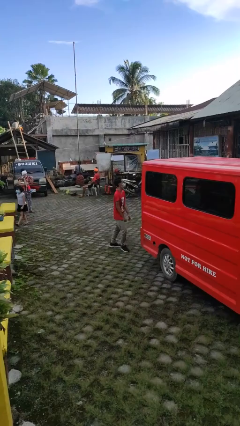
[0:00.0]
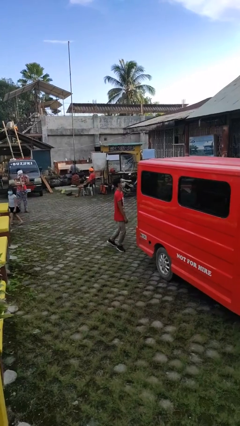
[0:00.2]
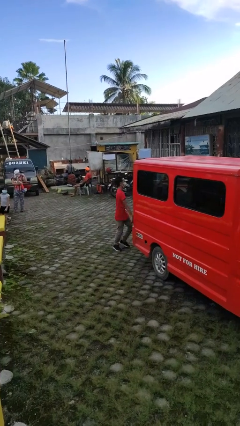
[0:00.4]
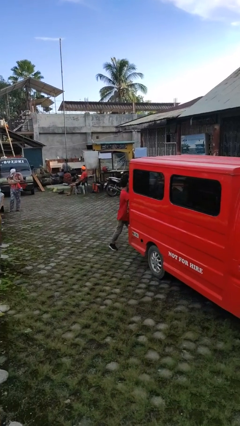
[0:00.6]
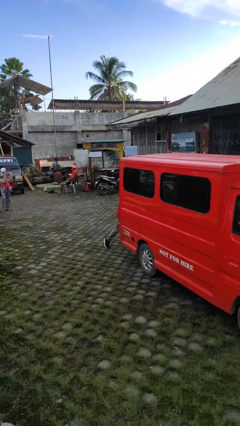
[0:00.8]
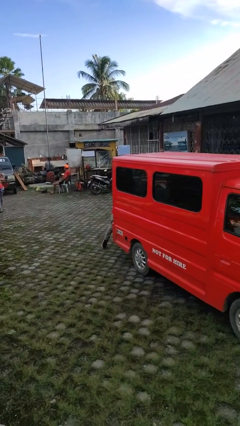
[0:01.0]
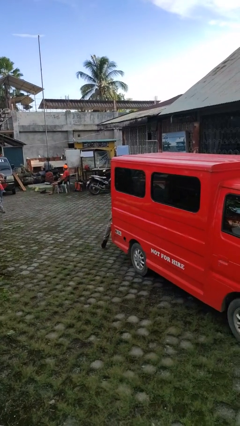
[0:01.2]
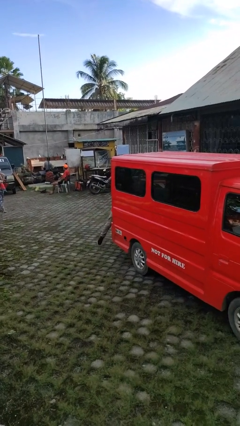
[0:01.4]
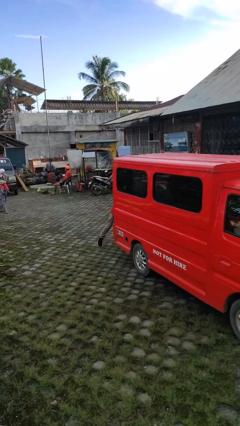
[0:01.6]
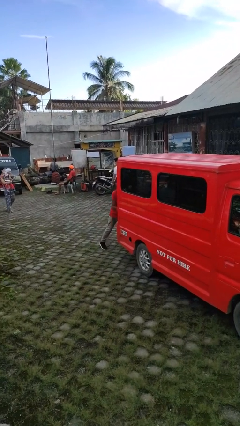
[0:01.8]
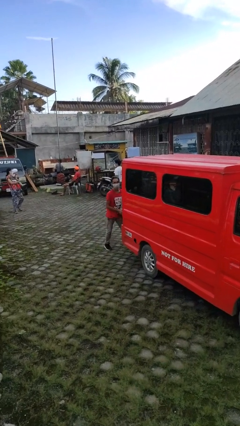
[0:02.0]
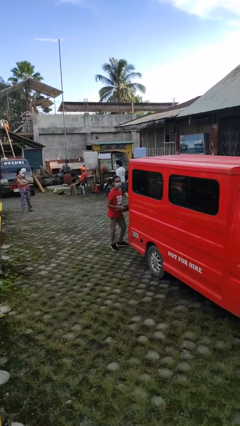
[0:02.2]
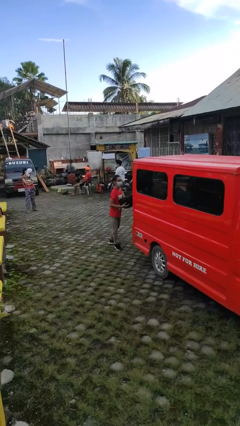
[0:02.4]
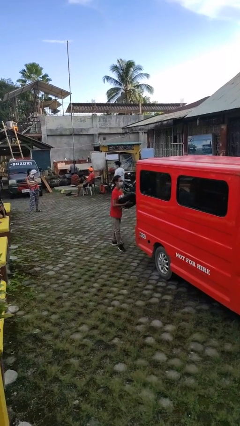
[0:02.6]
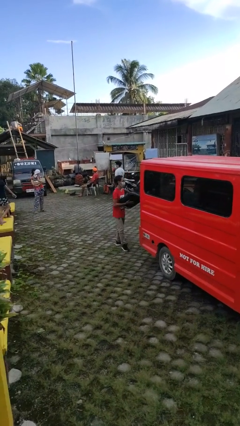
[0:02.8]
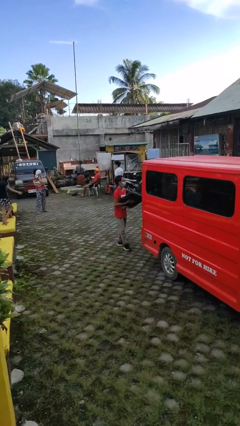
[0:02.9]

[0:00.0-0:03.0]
person unloads car

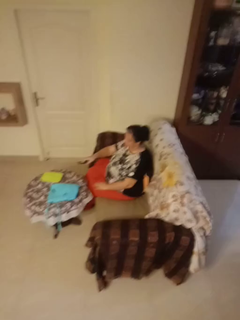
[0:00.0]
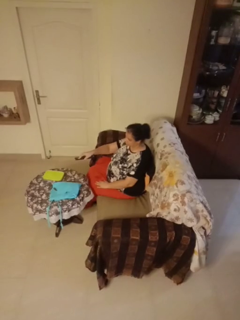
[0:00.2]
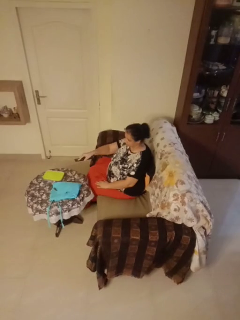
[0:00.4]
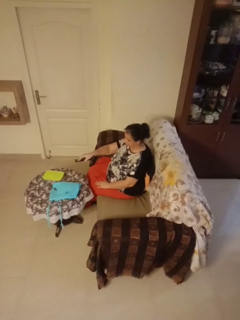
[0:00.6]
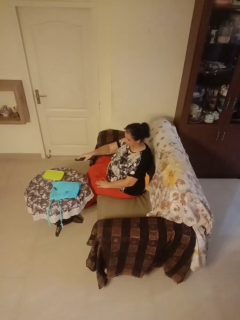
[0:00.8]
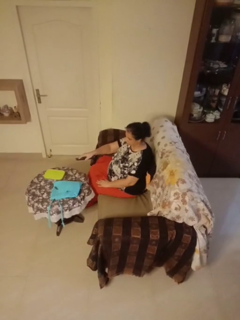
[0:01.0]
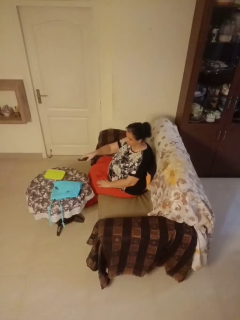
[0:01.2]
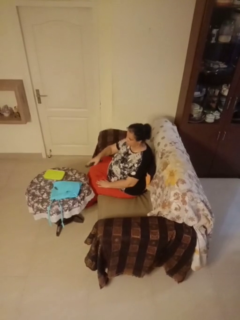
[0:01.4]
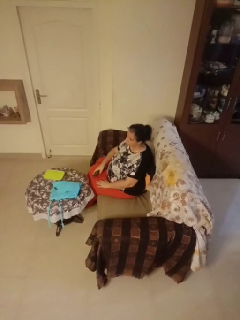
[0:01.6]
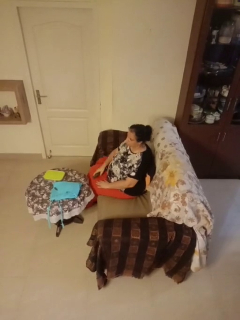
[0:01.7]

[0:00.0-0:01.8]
person uses television remote

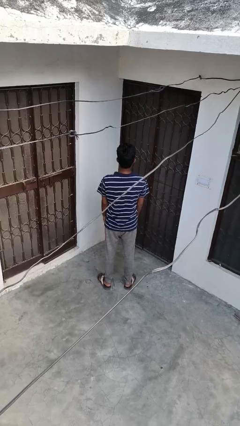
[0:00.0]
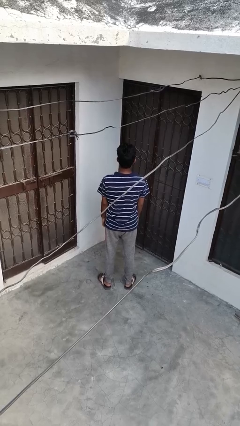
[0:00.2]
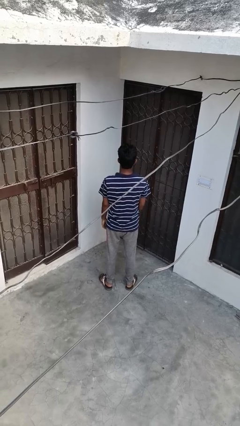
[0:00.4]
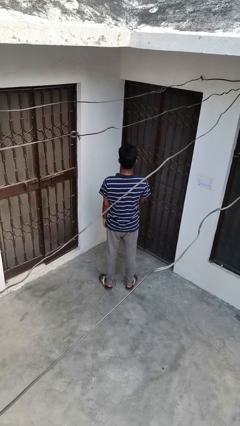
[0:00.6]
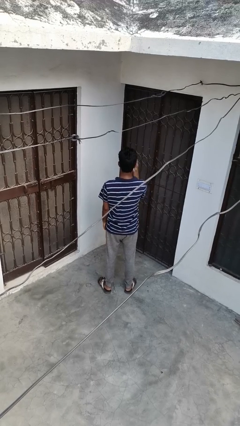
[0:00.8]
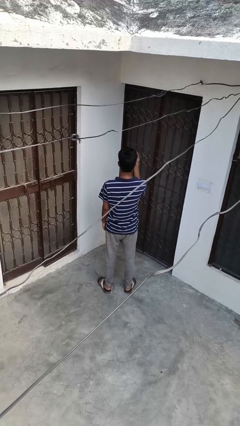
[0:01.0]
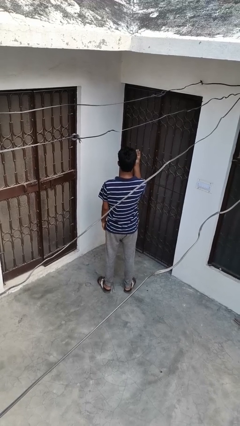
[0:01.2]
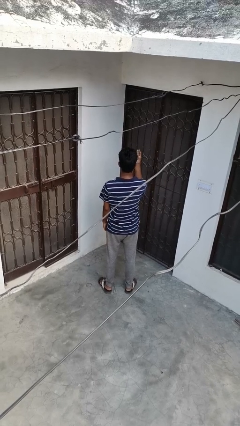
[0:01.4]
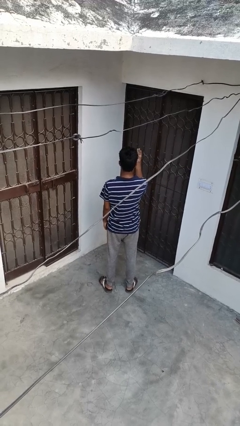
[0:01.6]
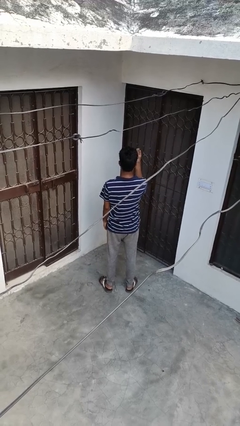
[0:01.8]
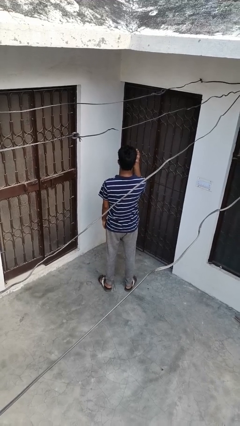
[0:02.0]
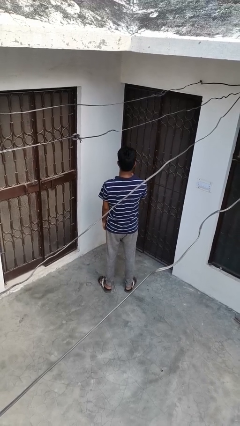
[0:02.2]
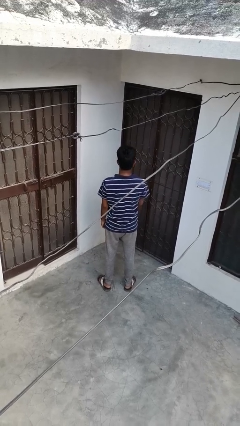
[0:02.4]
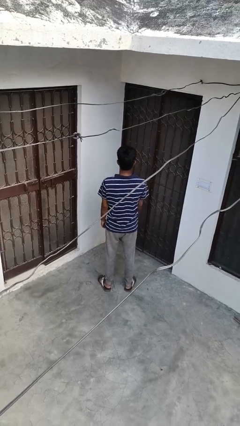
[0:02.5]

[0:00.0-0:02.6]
person gestures number four

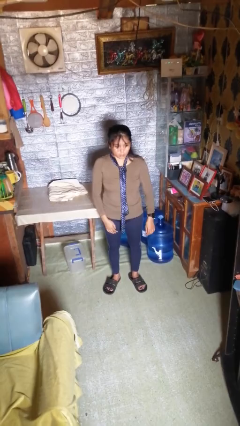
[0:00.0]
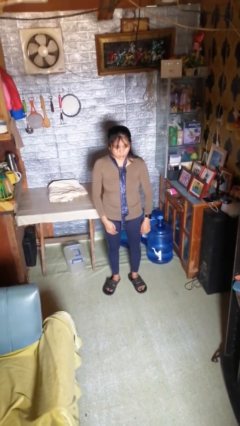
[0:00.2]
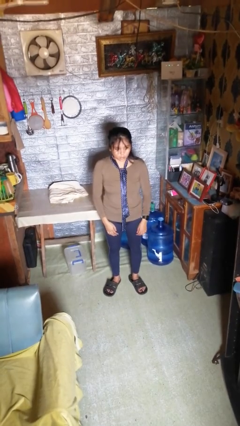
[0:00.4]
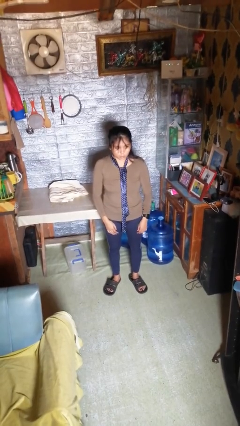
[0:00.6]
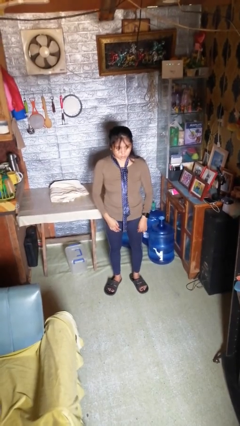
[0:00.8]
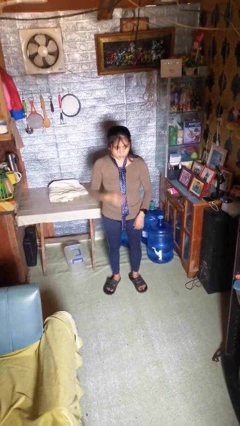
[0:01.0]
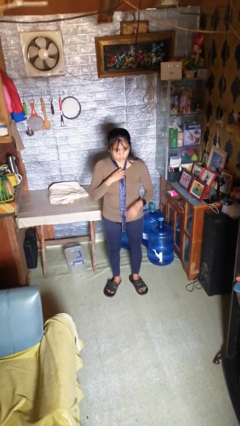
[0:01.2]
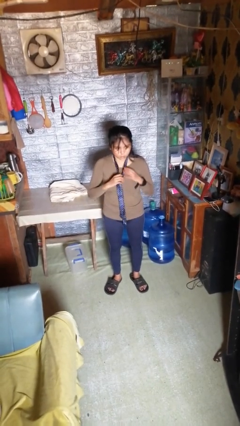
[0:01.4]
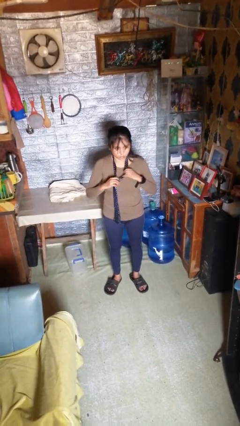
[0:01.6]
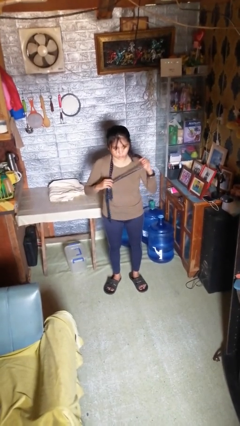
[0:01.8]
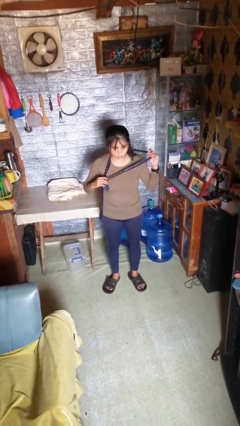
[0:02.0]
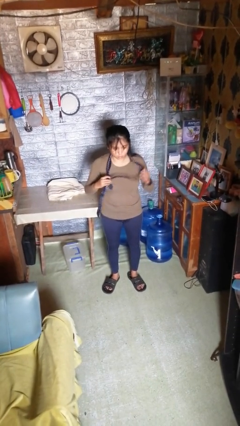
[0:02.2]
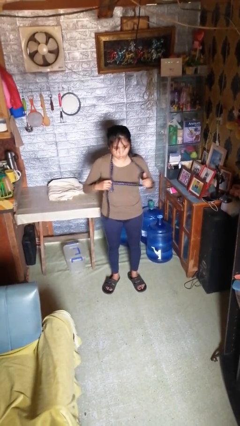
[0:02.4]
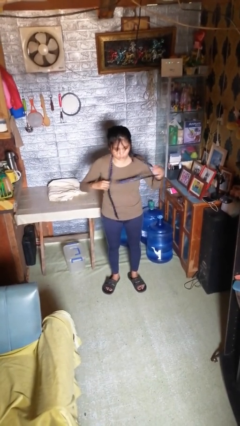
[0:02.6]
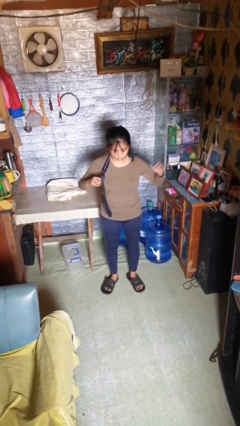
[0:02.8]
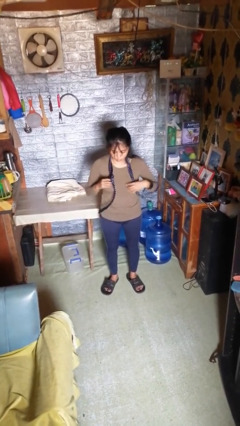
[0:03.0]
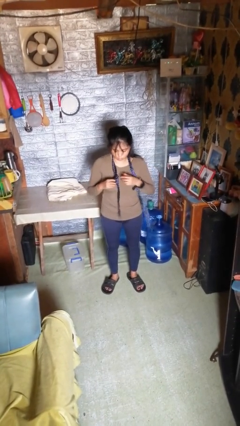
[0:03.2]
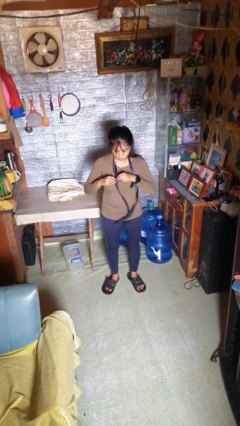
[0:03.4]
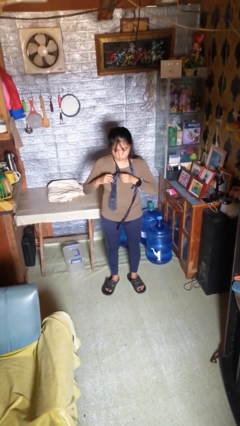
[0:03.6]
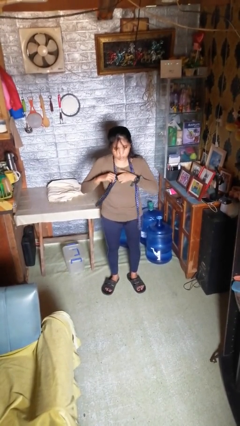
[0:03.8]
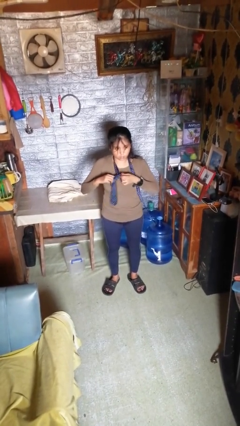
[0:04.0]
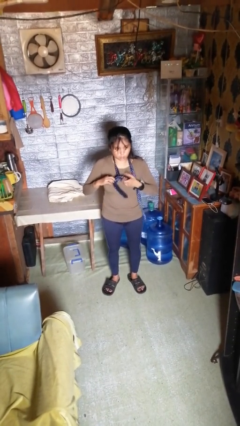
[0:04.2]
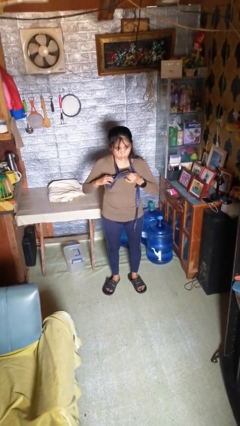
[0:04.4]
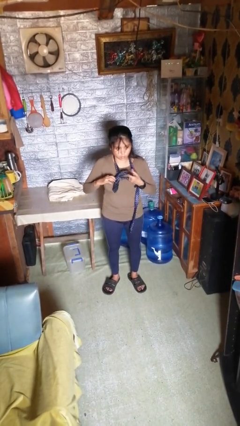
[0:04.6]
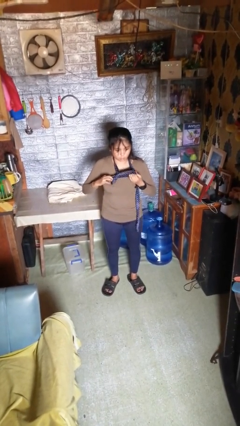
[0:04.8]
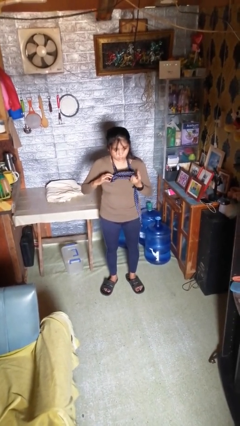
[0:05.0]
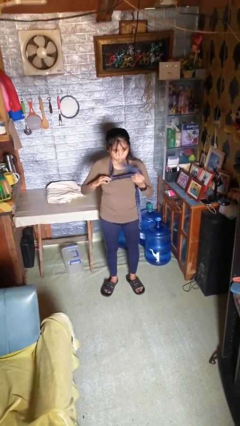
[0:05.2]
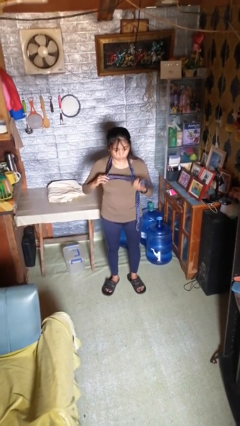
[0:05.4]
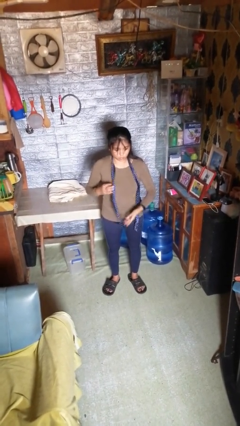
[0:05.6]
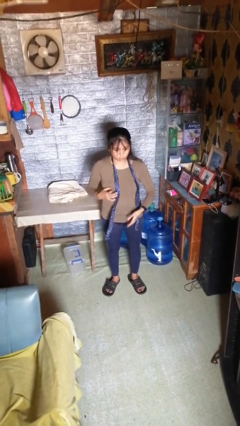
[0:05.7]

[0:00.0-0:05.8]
person takes off necktie

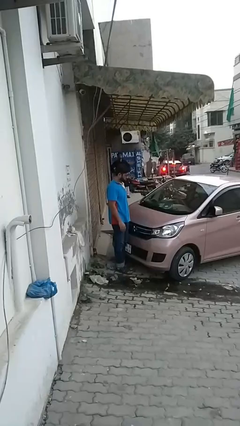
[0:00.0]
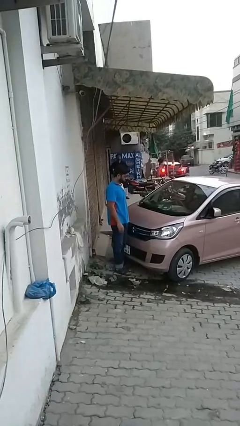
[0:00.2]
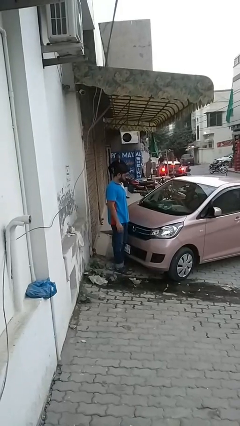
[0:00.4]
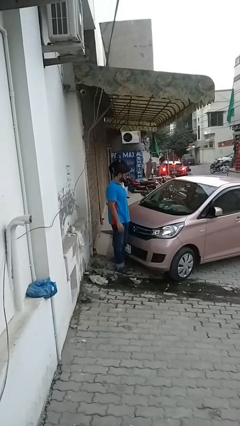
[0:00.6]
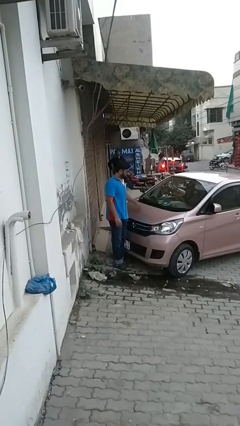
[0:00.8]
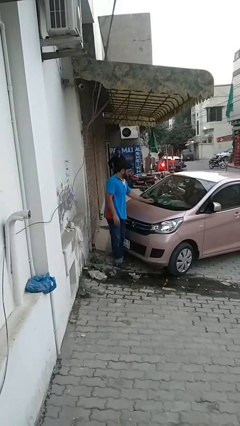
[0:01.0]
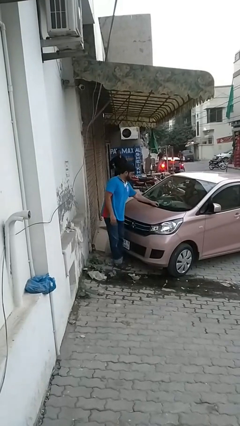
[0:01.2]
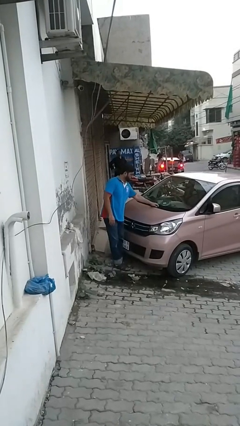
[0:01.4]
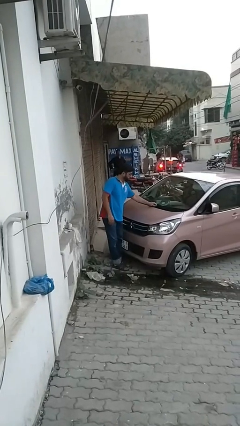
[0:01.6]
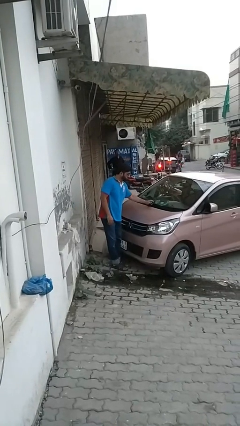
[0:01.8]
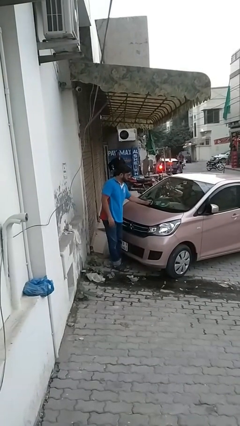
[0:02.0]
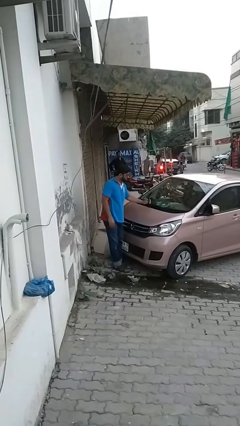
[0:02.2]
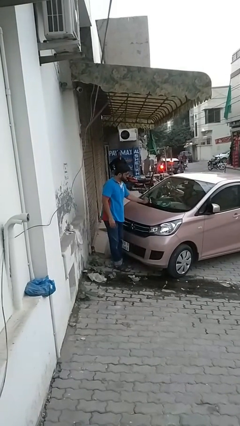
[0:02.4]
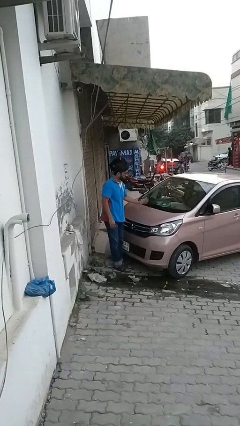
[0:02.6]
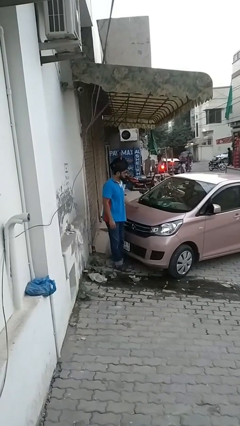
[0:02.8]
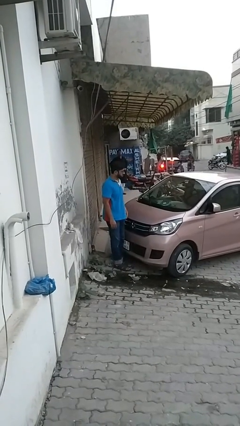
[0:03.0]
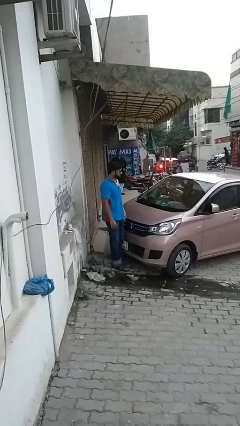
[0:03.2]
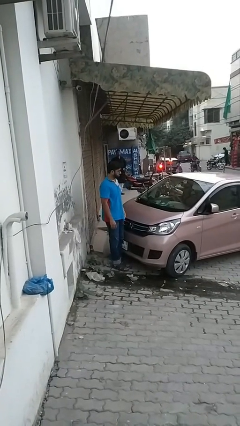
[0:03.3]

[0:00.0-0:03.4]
person flips up car wipers

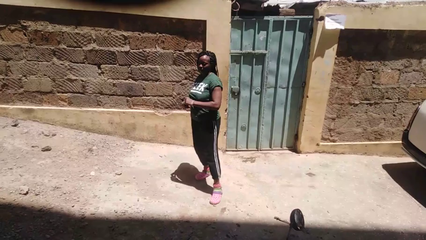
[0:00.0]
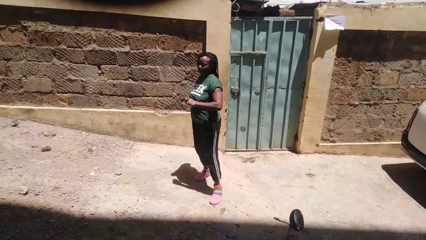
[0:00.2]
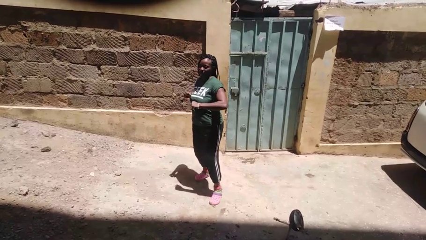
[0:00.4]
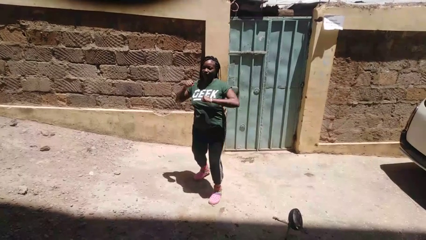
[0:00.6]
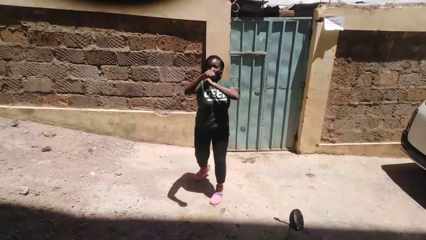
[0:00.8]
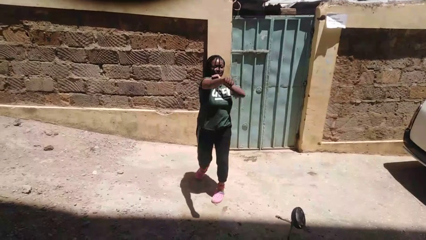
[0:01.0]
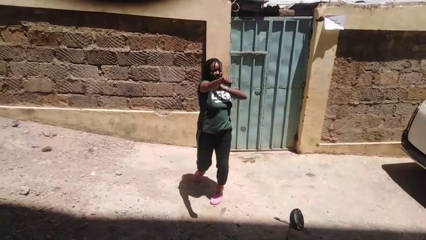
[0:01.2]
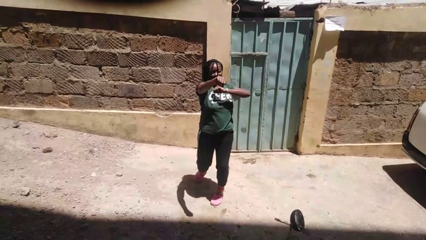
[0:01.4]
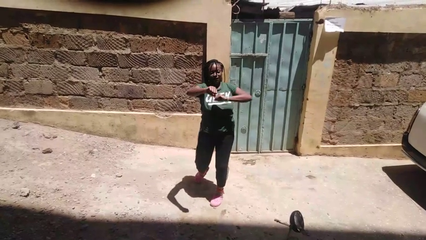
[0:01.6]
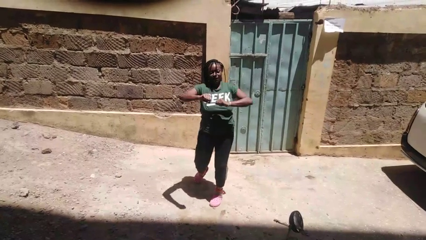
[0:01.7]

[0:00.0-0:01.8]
person punches
